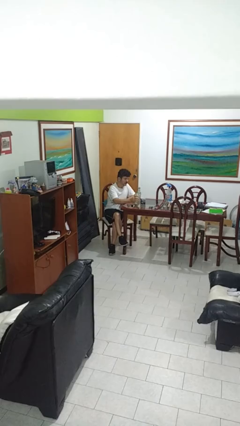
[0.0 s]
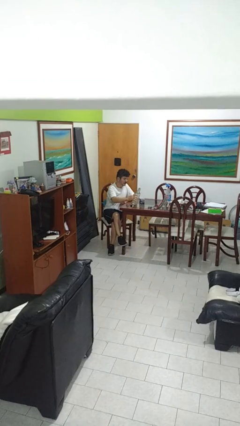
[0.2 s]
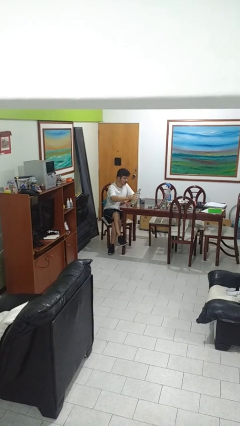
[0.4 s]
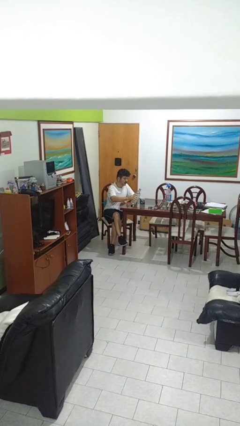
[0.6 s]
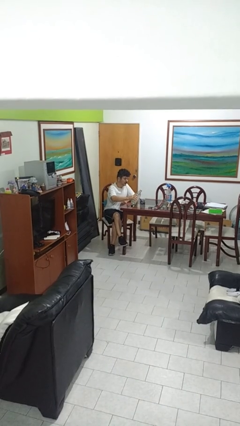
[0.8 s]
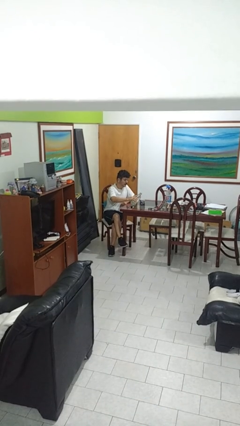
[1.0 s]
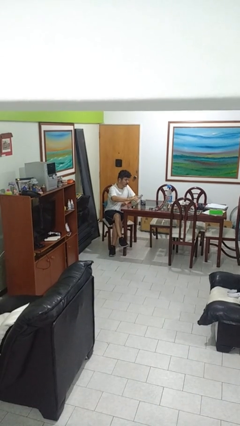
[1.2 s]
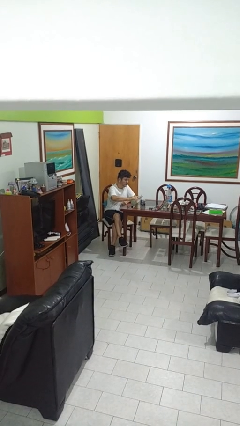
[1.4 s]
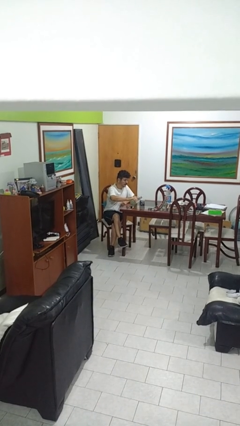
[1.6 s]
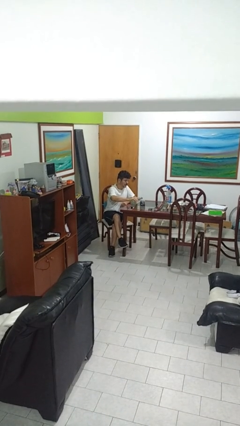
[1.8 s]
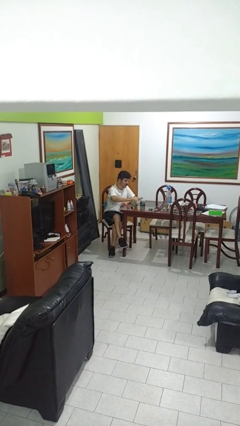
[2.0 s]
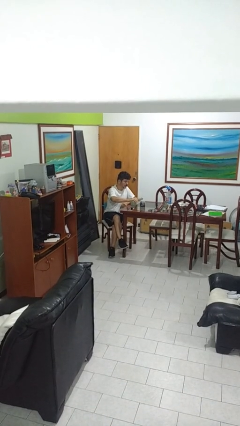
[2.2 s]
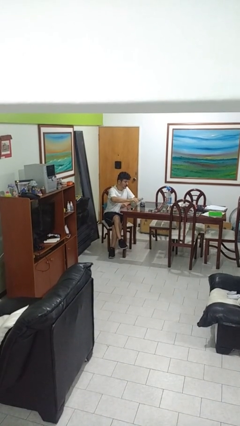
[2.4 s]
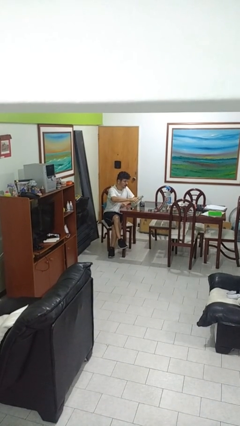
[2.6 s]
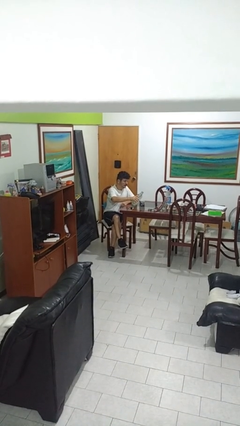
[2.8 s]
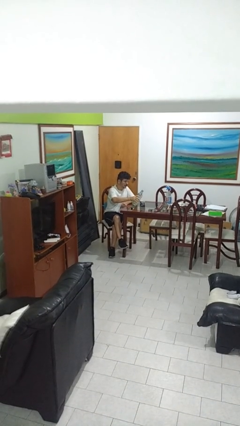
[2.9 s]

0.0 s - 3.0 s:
person pours liquid into cup

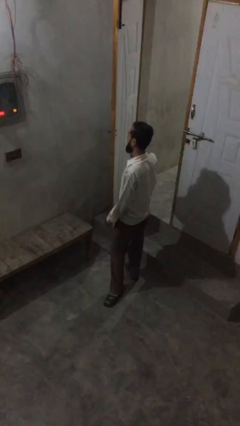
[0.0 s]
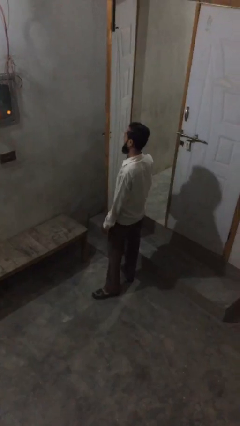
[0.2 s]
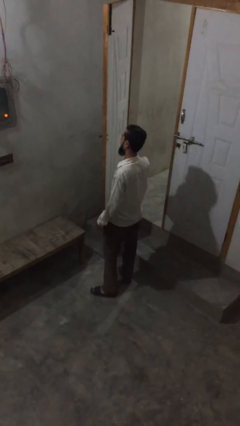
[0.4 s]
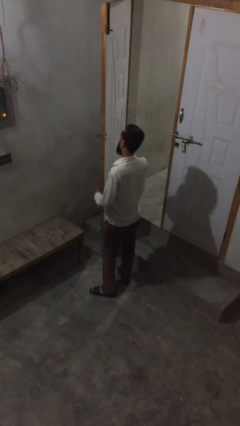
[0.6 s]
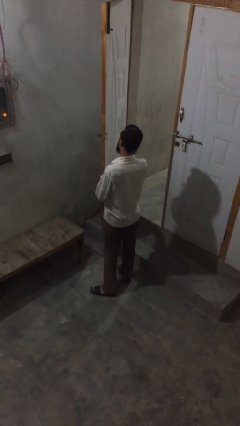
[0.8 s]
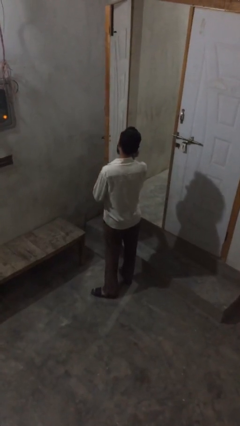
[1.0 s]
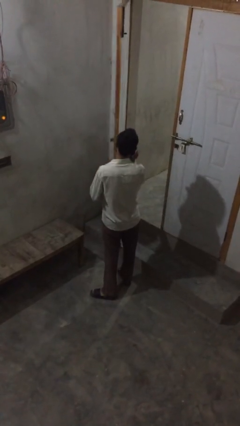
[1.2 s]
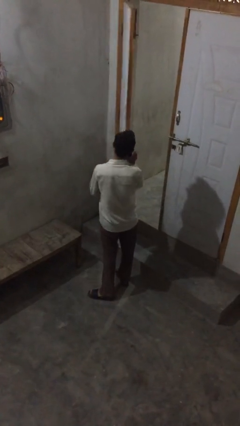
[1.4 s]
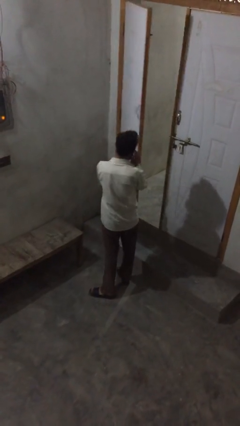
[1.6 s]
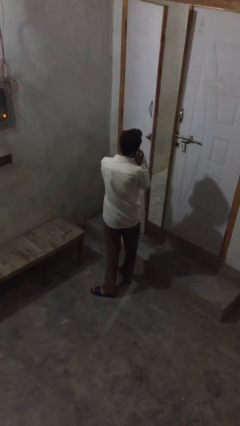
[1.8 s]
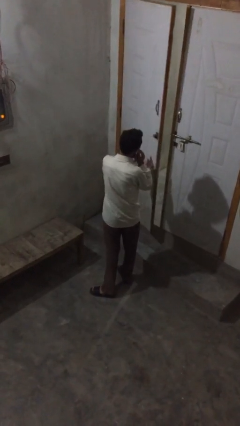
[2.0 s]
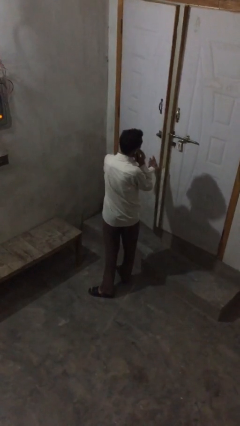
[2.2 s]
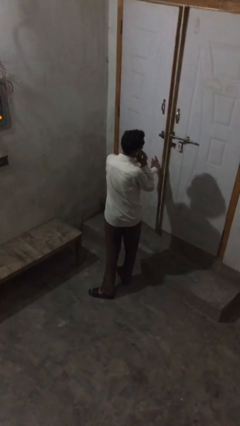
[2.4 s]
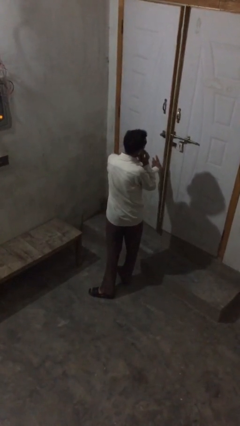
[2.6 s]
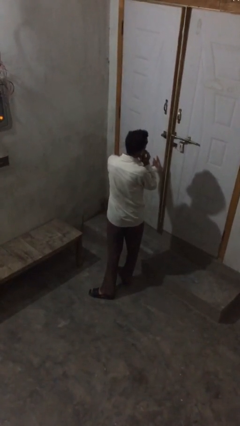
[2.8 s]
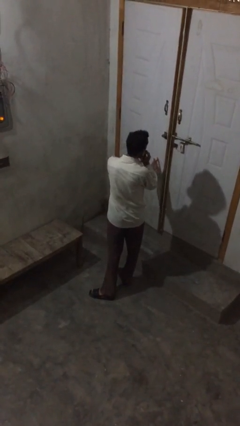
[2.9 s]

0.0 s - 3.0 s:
person closes facility door

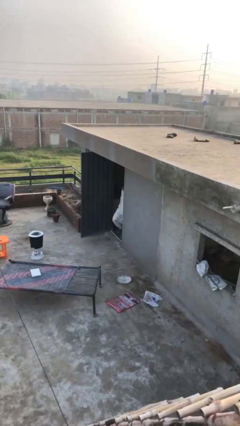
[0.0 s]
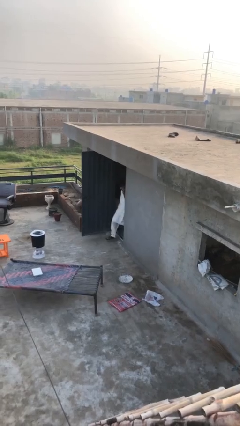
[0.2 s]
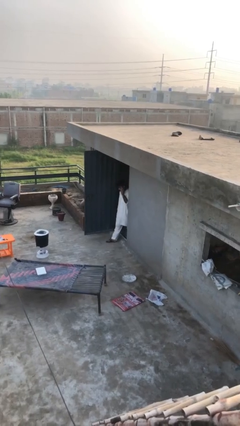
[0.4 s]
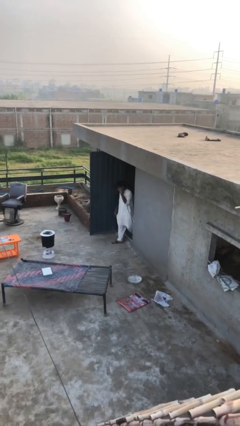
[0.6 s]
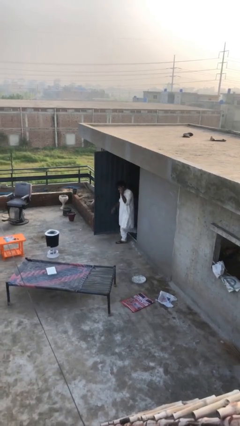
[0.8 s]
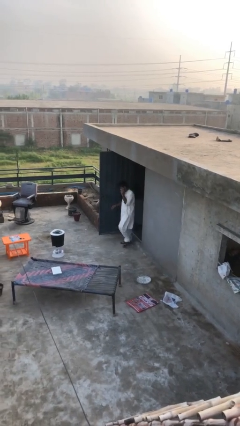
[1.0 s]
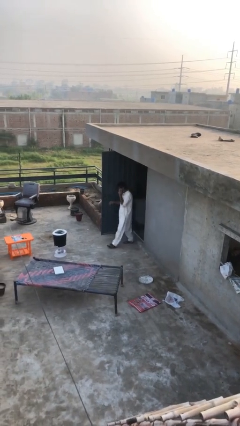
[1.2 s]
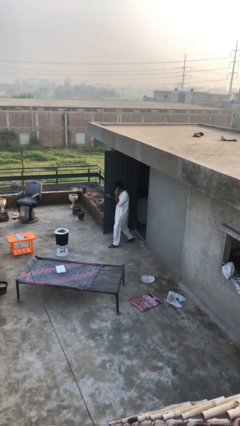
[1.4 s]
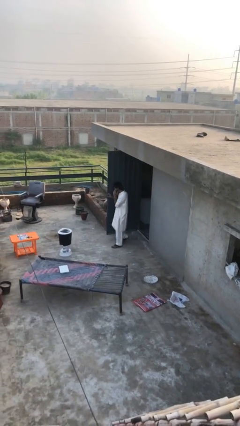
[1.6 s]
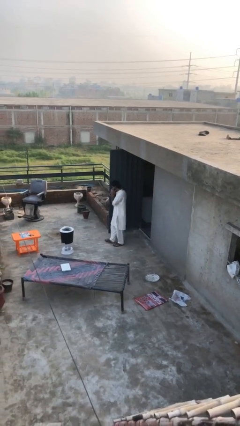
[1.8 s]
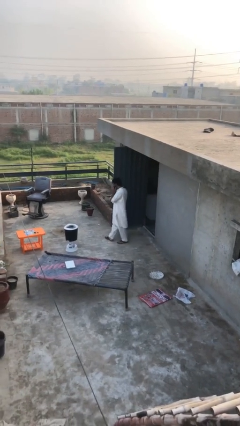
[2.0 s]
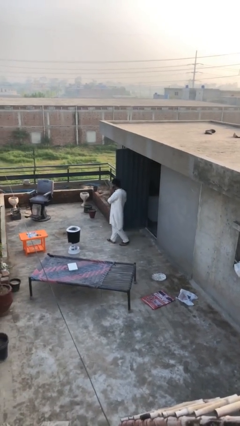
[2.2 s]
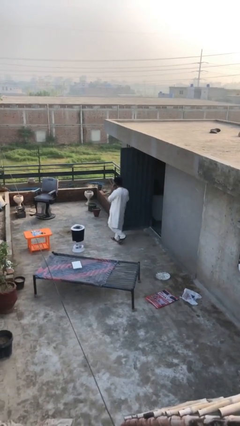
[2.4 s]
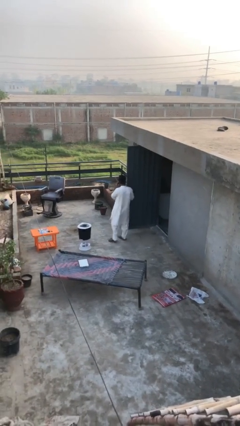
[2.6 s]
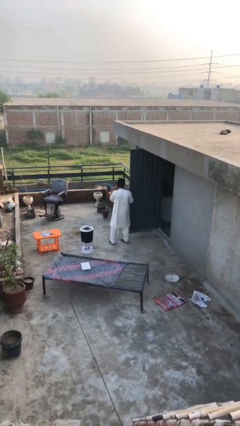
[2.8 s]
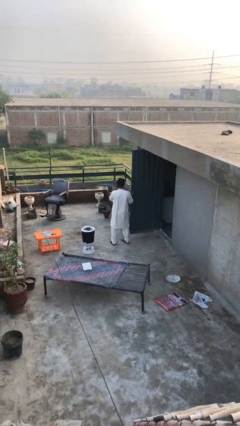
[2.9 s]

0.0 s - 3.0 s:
person enters scene through structure

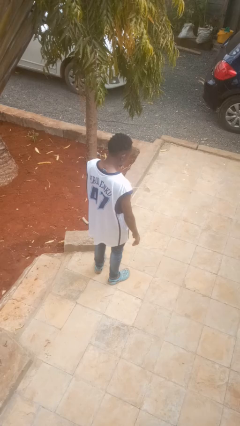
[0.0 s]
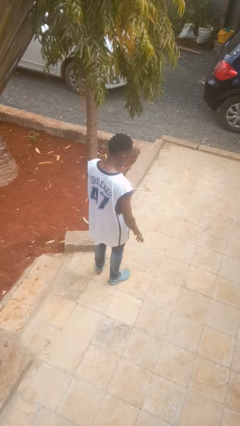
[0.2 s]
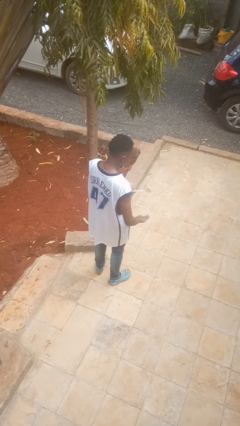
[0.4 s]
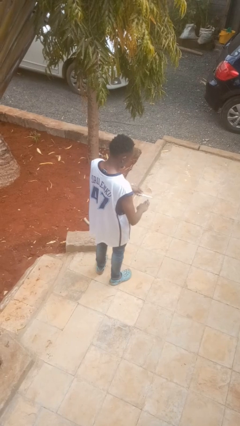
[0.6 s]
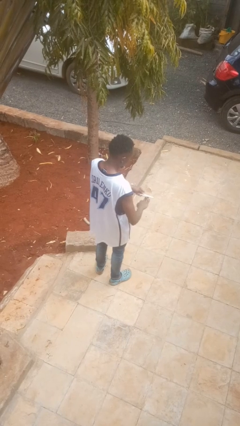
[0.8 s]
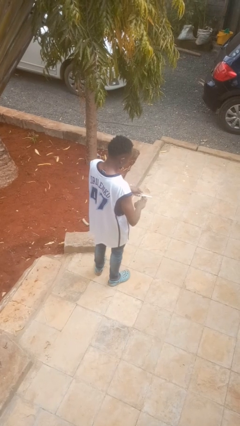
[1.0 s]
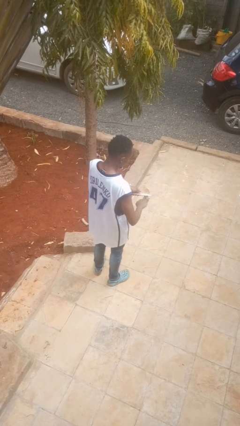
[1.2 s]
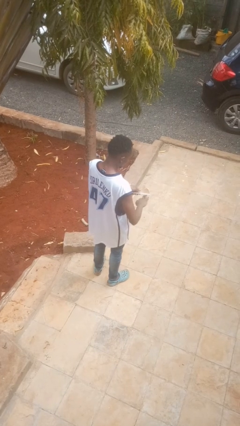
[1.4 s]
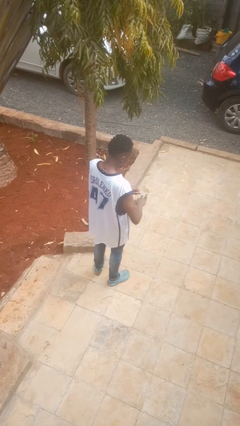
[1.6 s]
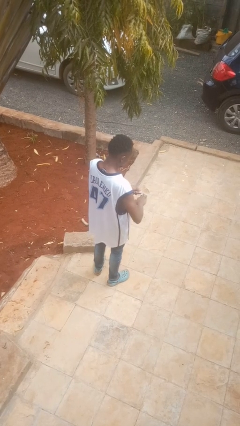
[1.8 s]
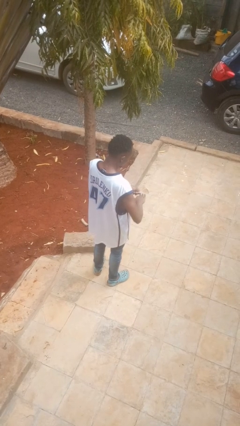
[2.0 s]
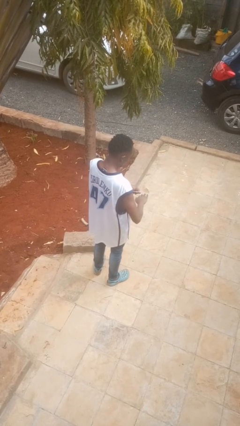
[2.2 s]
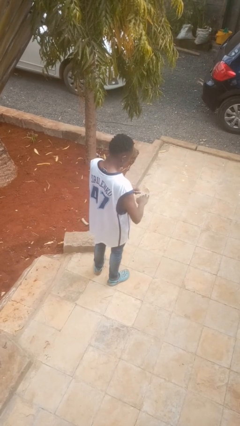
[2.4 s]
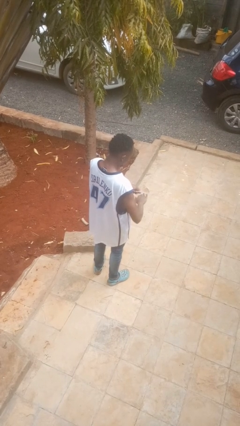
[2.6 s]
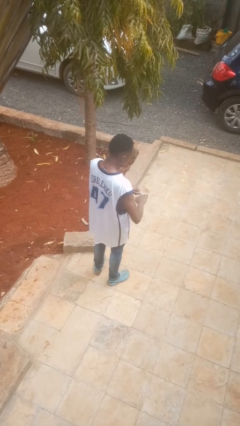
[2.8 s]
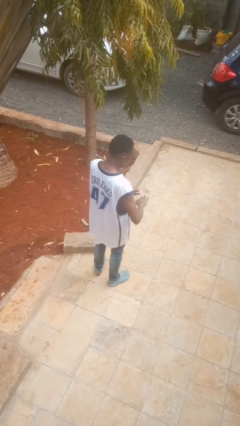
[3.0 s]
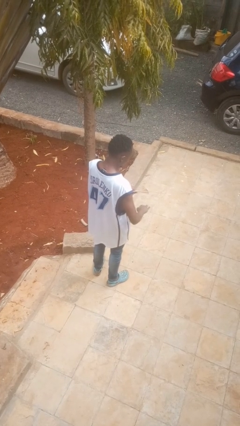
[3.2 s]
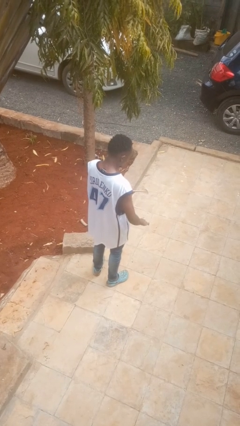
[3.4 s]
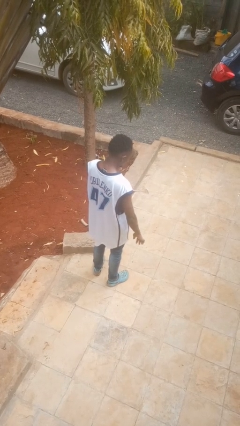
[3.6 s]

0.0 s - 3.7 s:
person files fingernails

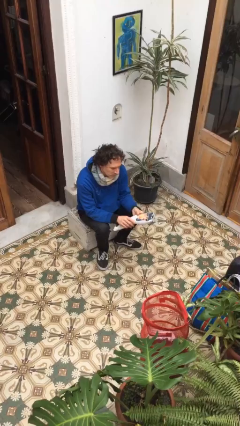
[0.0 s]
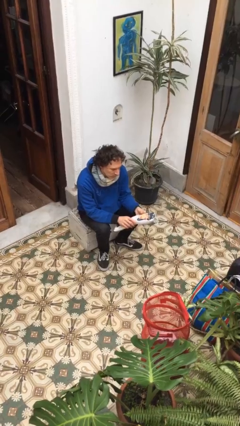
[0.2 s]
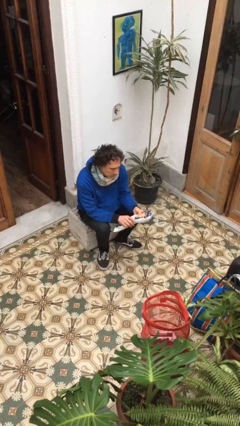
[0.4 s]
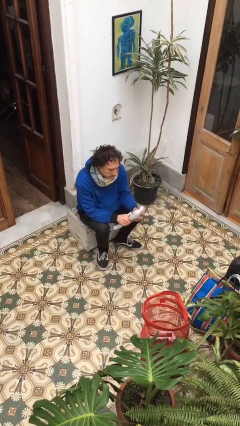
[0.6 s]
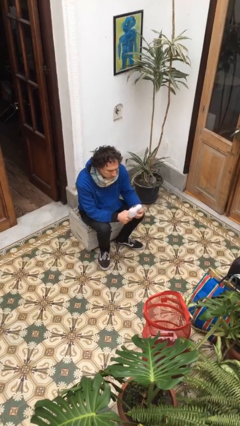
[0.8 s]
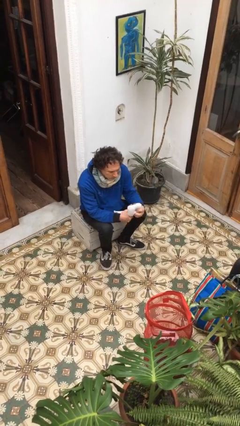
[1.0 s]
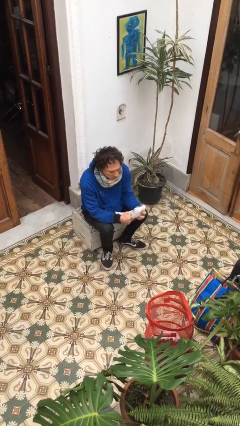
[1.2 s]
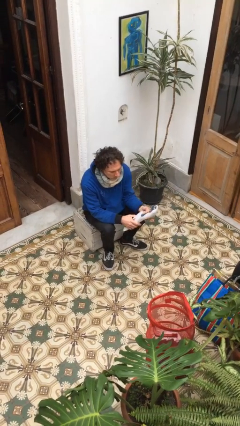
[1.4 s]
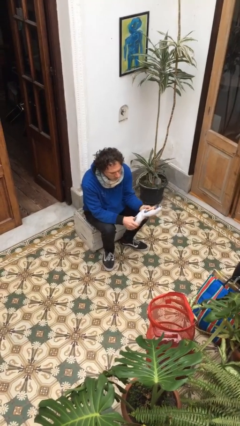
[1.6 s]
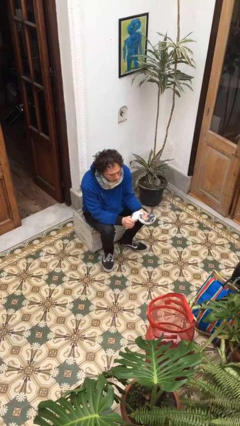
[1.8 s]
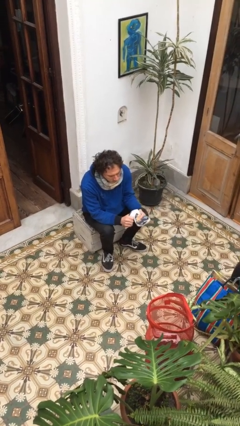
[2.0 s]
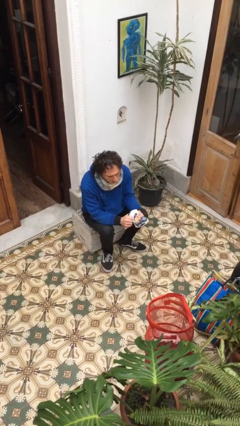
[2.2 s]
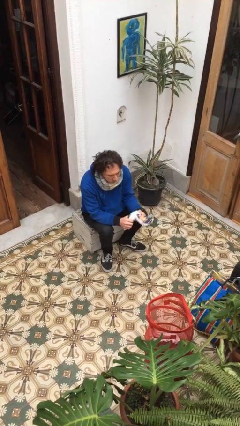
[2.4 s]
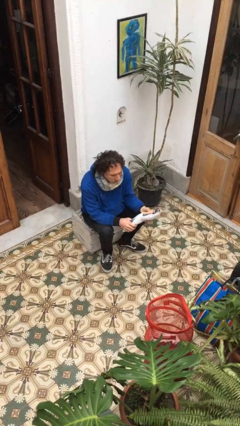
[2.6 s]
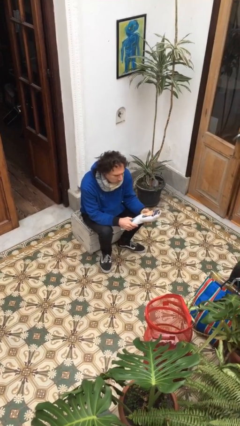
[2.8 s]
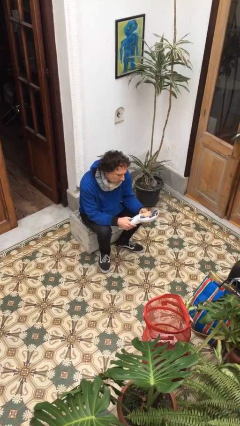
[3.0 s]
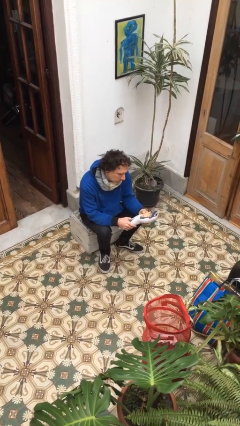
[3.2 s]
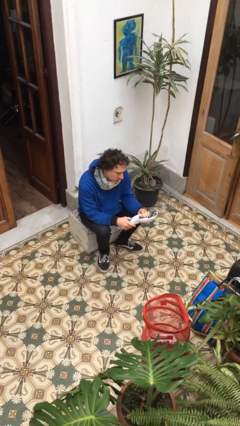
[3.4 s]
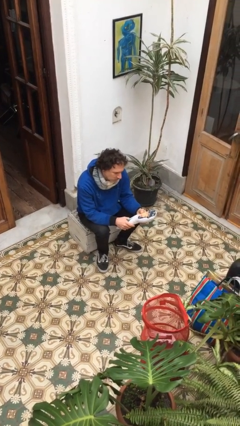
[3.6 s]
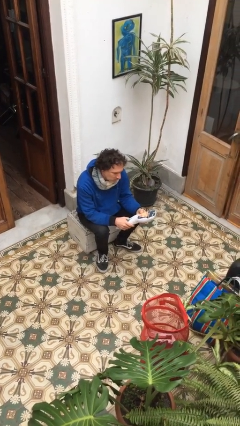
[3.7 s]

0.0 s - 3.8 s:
person squeezes object

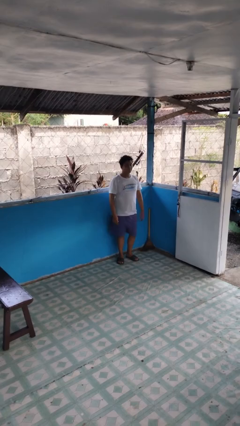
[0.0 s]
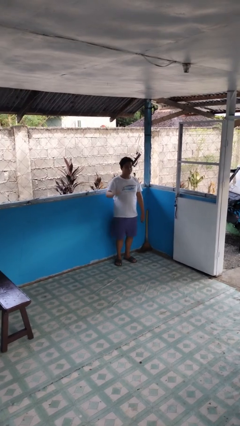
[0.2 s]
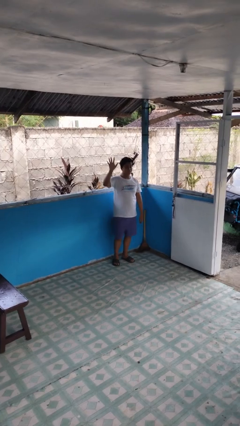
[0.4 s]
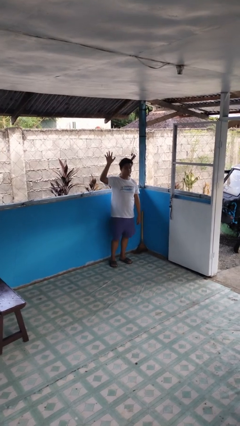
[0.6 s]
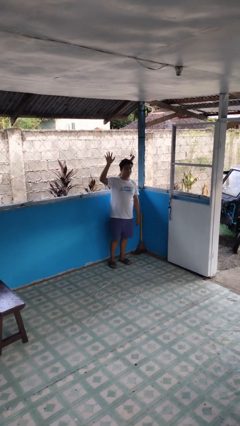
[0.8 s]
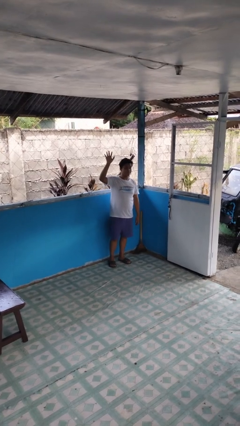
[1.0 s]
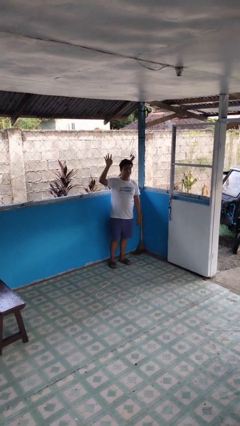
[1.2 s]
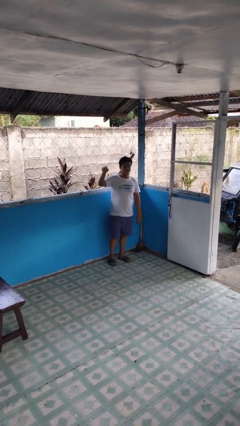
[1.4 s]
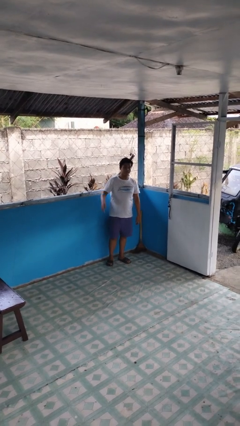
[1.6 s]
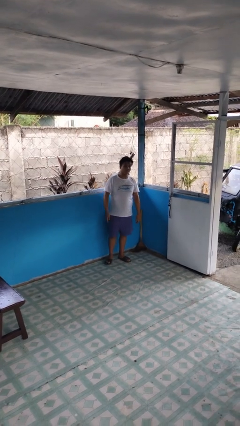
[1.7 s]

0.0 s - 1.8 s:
person gestures number five
